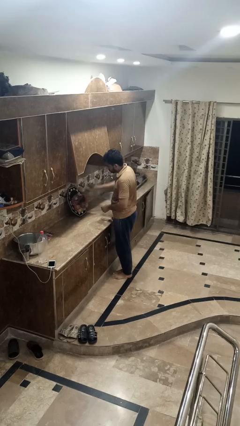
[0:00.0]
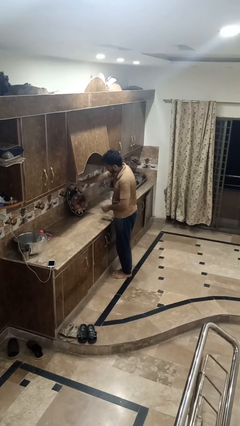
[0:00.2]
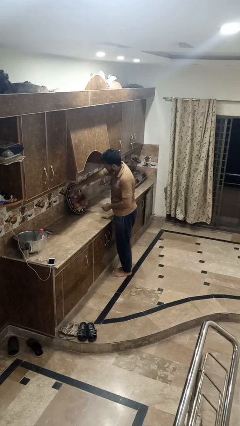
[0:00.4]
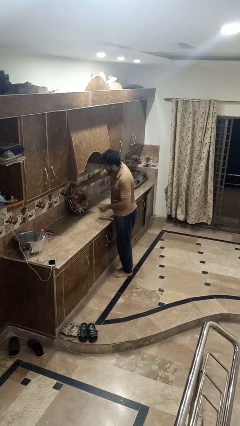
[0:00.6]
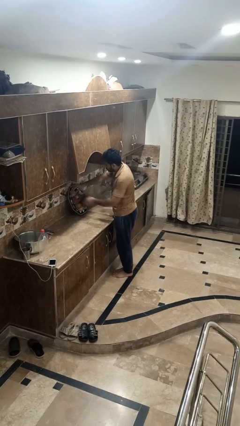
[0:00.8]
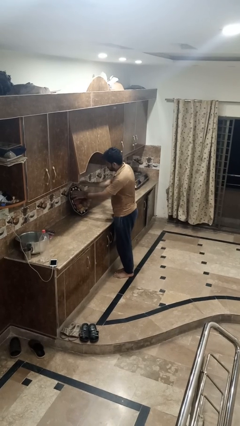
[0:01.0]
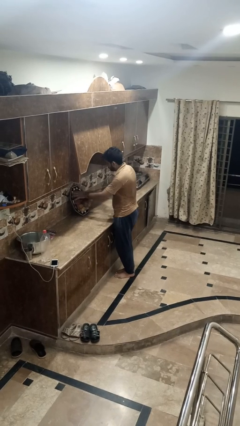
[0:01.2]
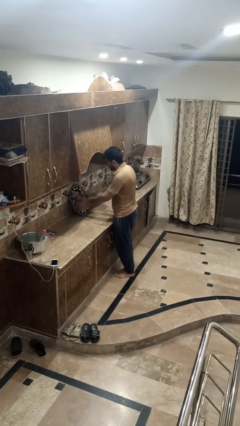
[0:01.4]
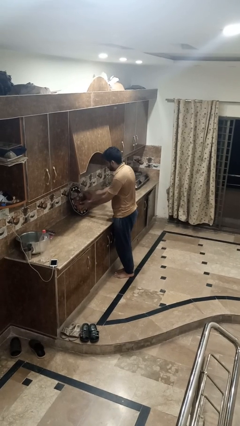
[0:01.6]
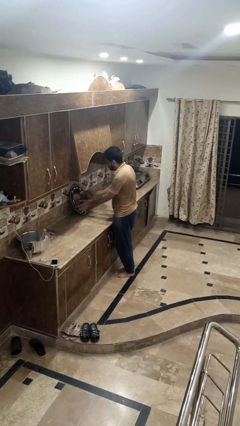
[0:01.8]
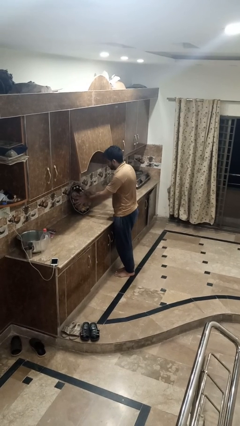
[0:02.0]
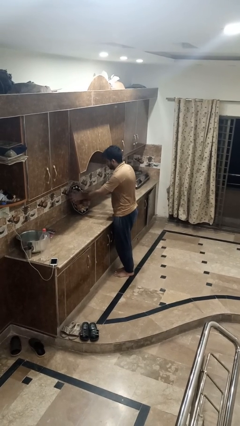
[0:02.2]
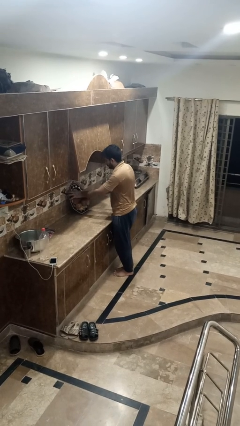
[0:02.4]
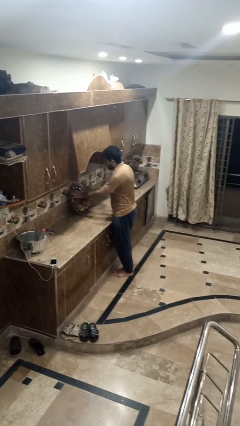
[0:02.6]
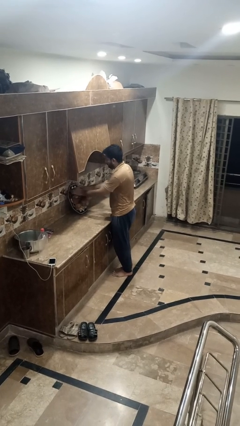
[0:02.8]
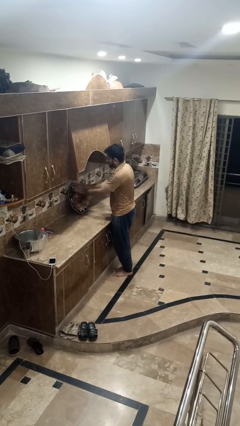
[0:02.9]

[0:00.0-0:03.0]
person arranges flowers in vase

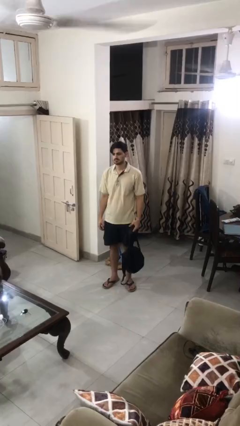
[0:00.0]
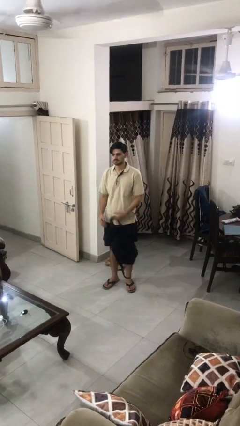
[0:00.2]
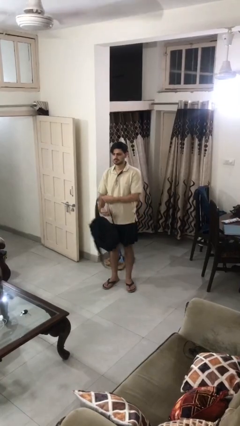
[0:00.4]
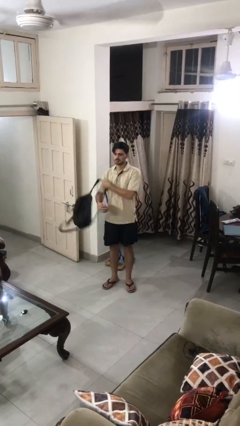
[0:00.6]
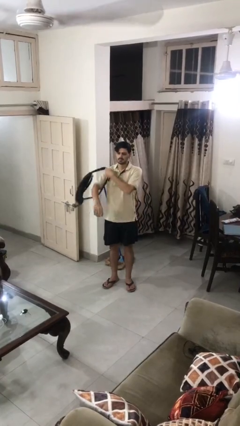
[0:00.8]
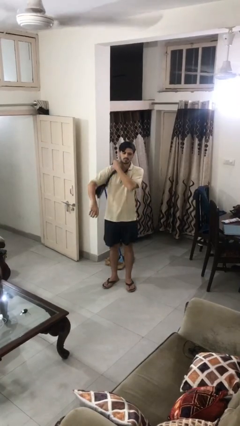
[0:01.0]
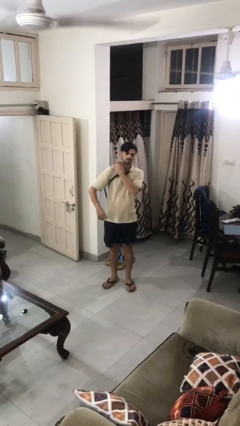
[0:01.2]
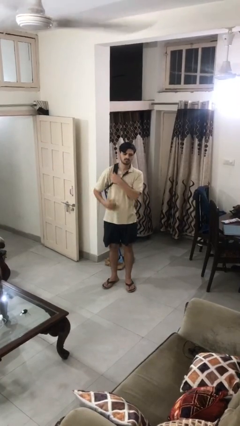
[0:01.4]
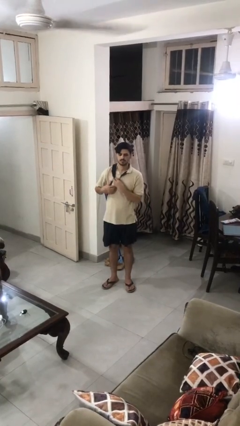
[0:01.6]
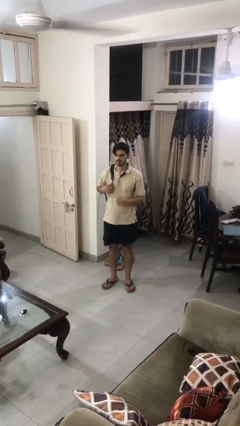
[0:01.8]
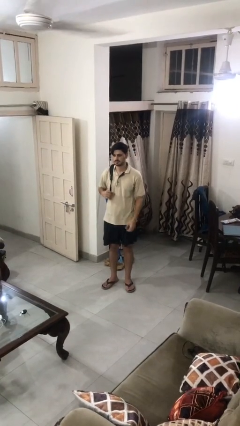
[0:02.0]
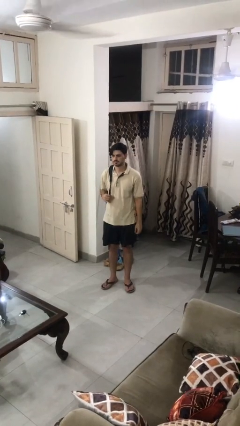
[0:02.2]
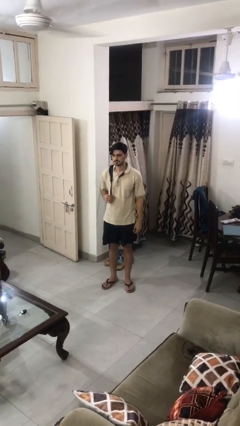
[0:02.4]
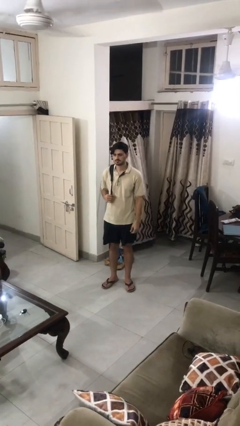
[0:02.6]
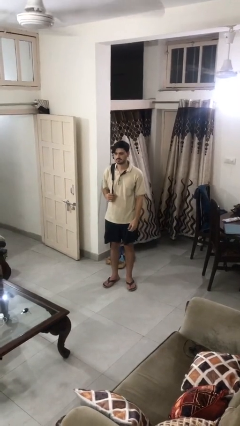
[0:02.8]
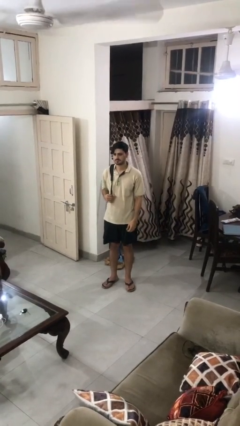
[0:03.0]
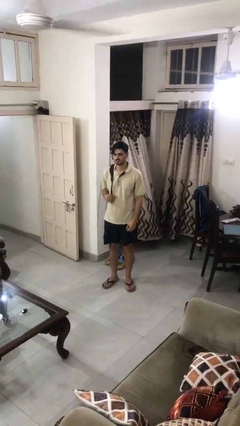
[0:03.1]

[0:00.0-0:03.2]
person puts on backpack

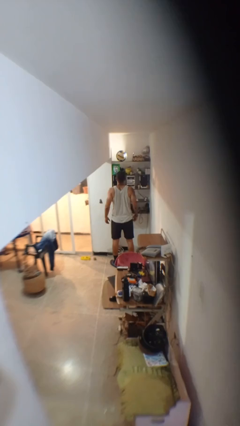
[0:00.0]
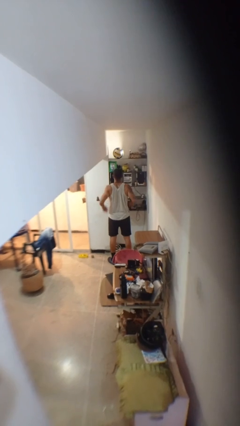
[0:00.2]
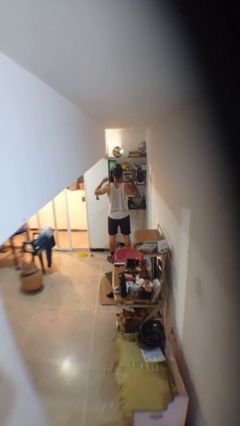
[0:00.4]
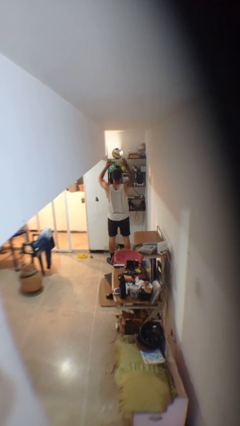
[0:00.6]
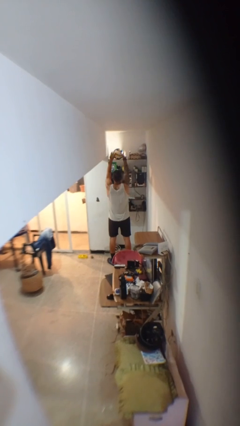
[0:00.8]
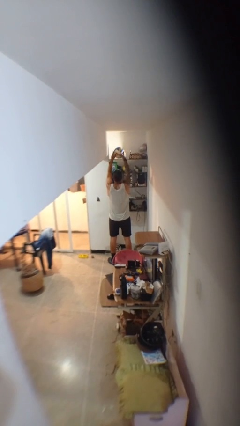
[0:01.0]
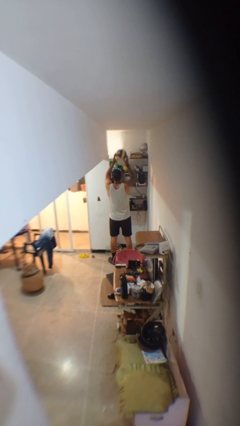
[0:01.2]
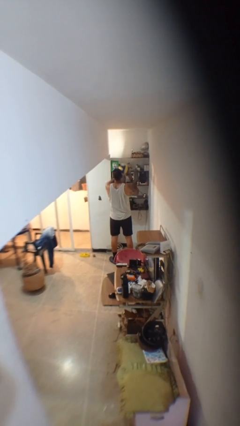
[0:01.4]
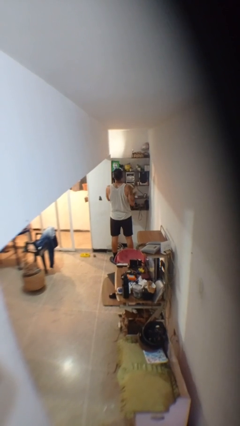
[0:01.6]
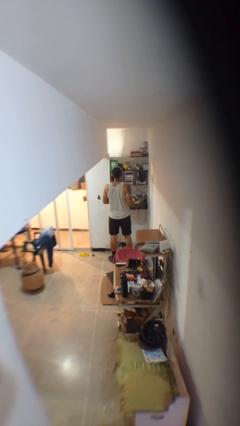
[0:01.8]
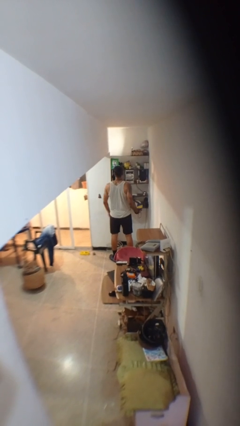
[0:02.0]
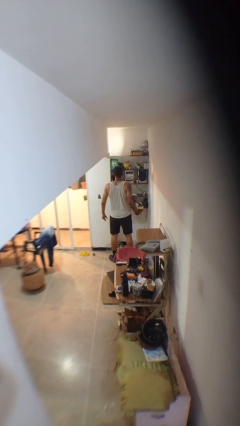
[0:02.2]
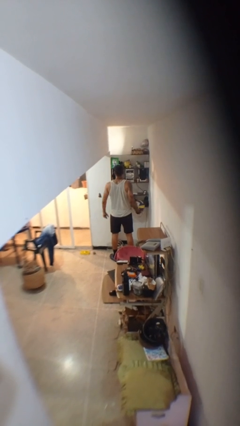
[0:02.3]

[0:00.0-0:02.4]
person picks up object from shelf

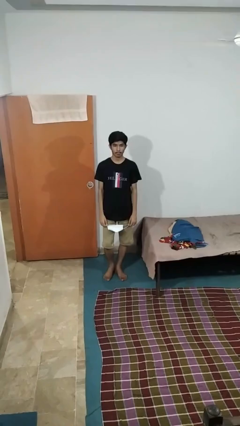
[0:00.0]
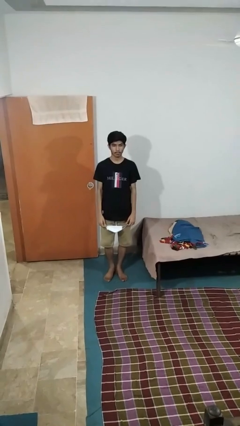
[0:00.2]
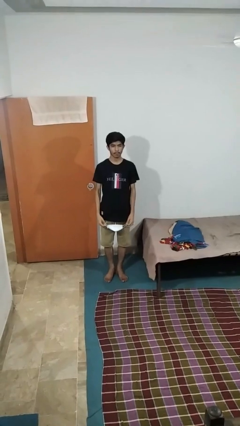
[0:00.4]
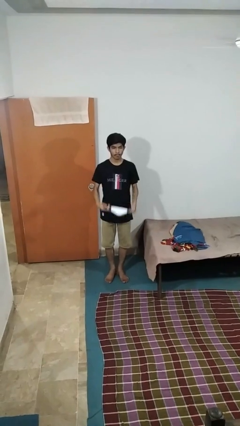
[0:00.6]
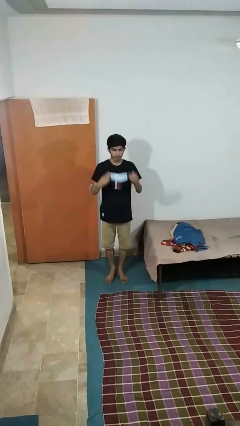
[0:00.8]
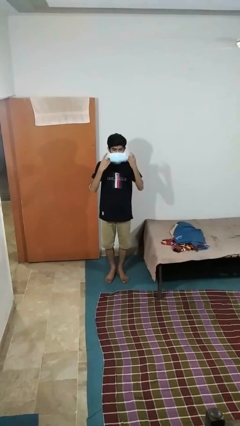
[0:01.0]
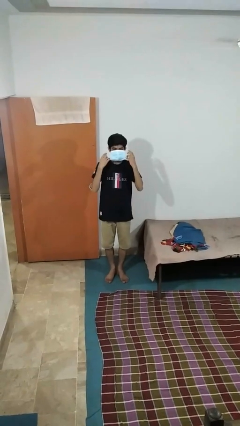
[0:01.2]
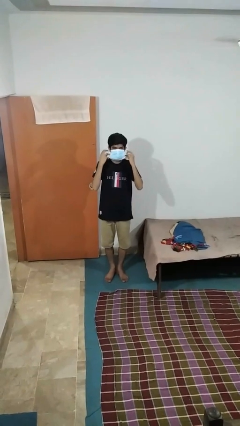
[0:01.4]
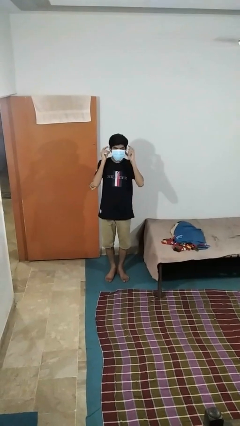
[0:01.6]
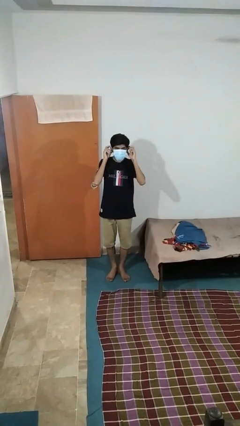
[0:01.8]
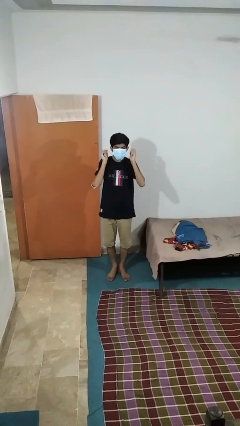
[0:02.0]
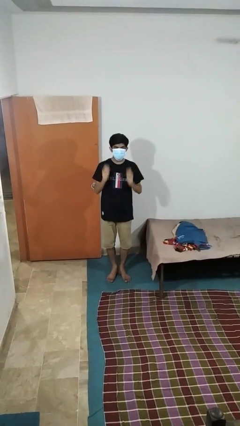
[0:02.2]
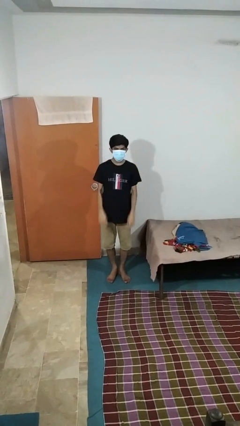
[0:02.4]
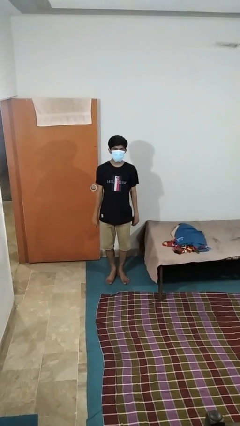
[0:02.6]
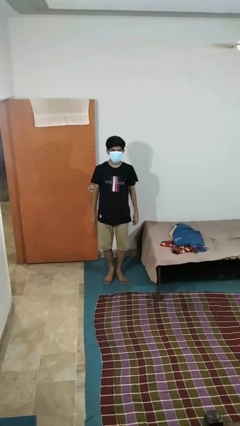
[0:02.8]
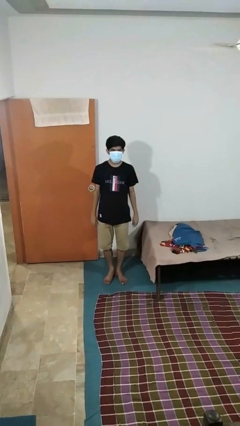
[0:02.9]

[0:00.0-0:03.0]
person puts on facemask

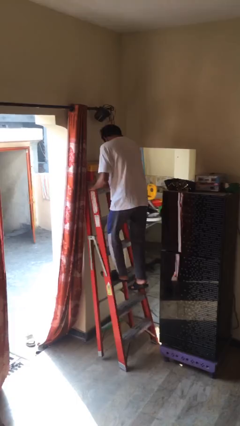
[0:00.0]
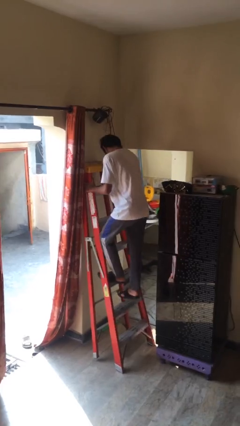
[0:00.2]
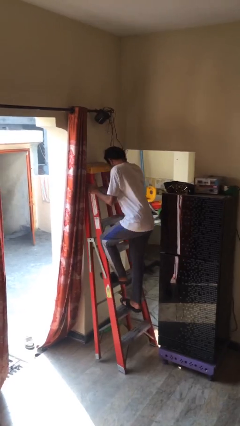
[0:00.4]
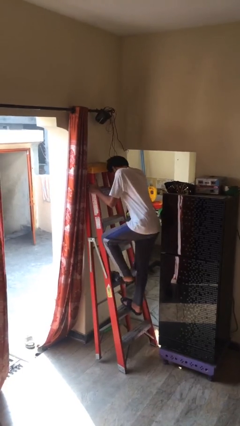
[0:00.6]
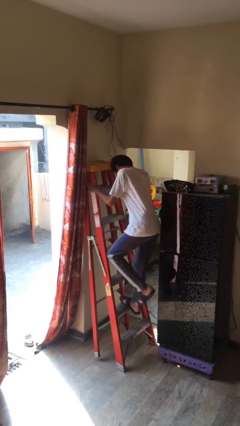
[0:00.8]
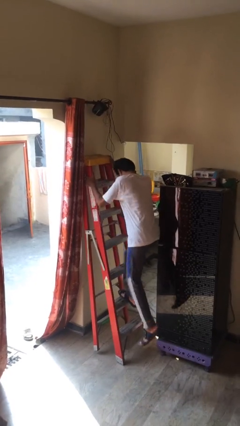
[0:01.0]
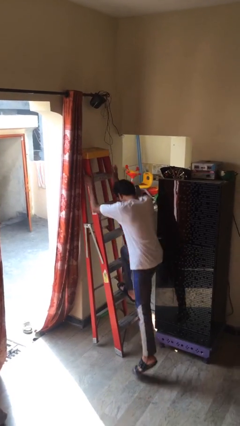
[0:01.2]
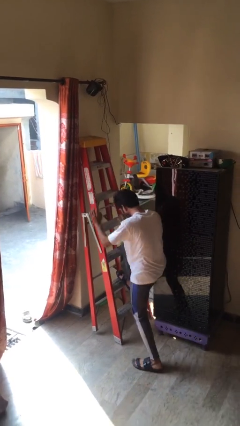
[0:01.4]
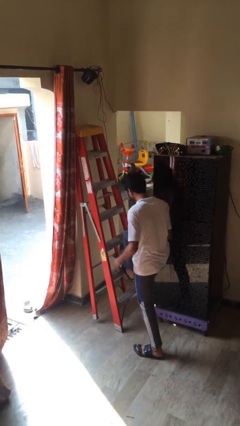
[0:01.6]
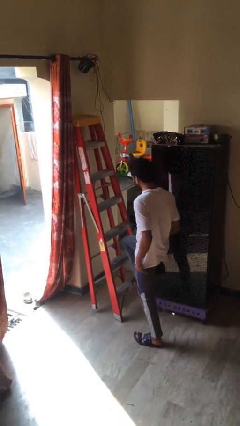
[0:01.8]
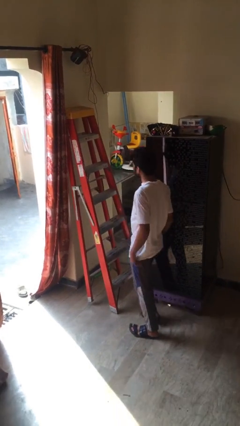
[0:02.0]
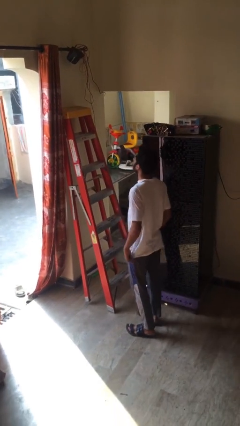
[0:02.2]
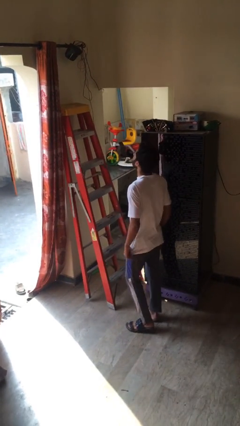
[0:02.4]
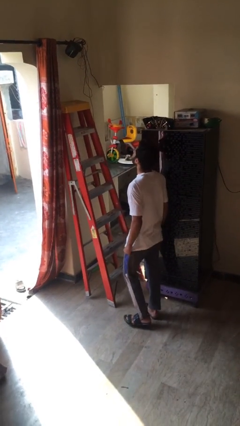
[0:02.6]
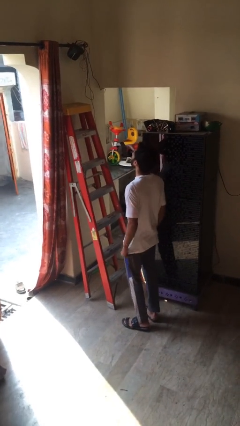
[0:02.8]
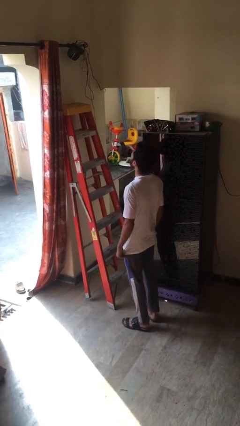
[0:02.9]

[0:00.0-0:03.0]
person climbs down ladder

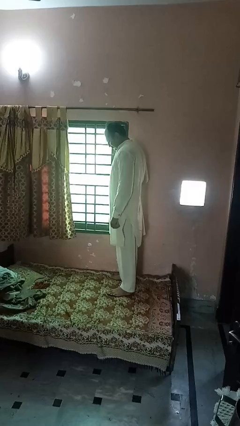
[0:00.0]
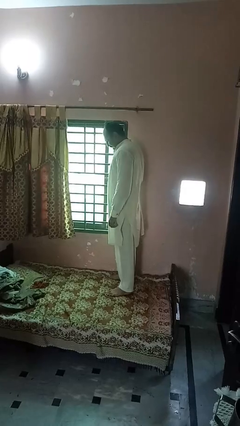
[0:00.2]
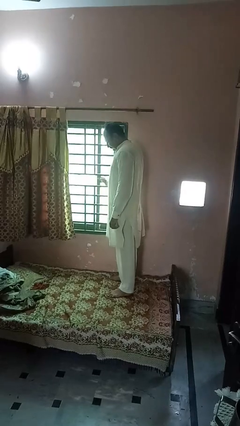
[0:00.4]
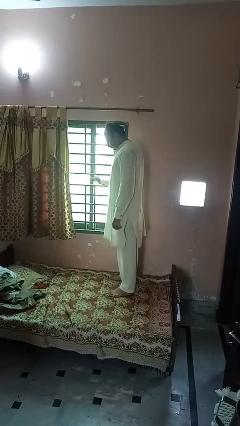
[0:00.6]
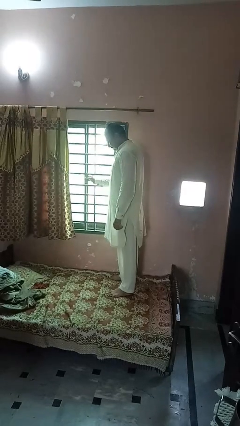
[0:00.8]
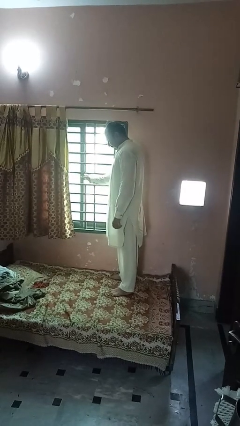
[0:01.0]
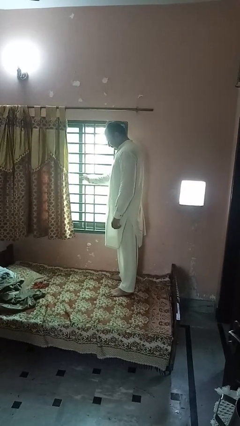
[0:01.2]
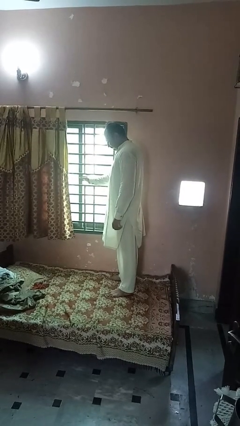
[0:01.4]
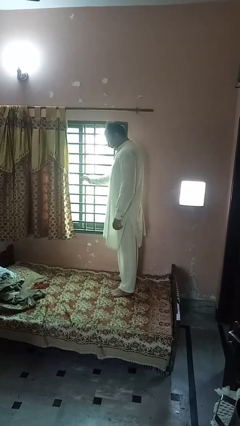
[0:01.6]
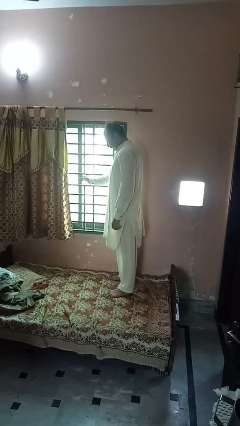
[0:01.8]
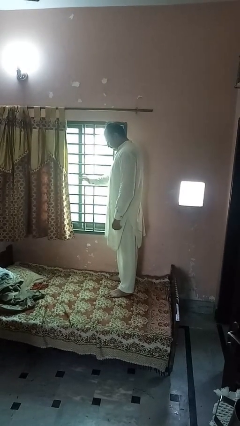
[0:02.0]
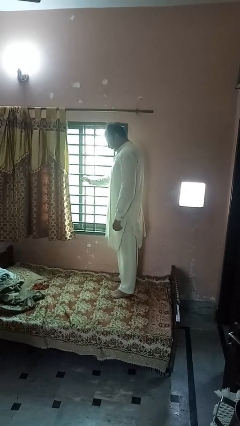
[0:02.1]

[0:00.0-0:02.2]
person opens home window

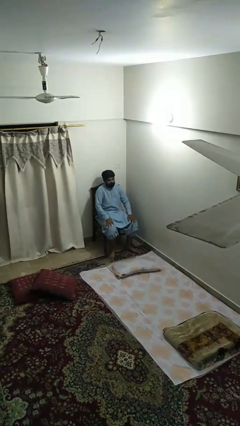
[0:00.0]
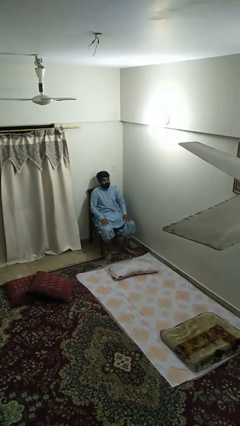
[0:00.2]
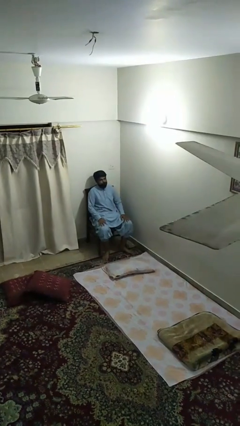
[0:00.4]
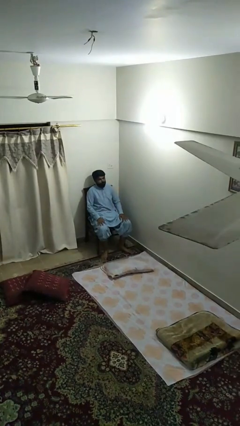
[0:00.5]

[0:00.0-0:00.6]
person sits down

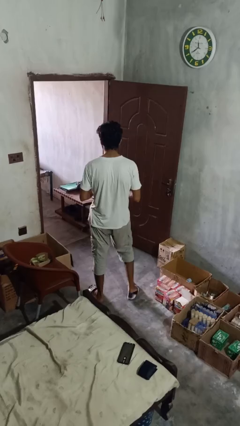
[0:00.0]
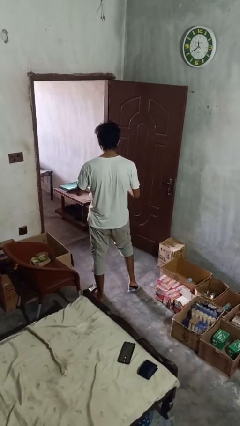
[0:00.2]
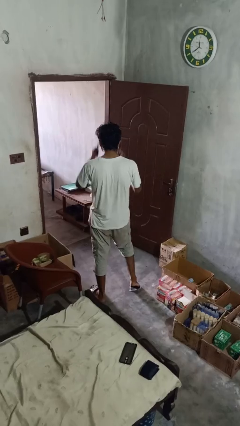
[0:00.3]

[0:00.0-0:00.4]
person puts on headphones
